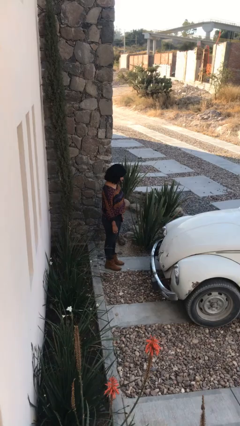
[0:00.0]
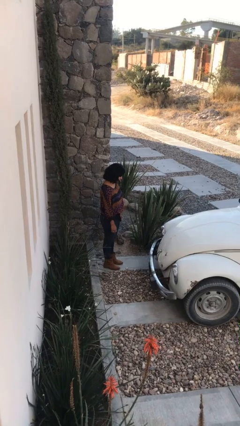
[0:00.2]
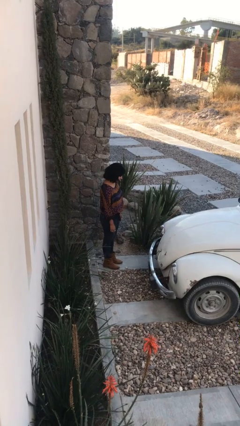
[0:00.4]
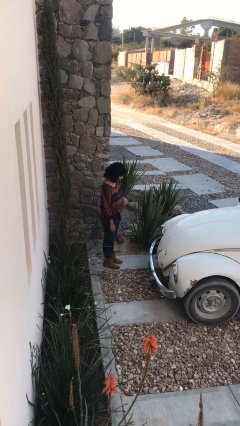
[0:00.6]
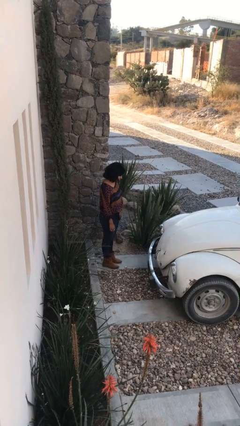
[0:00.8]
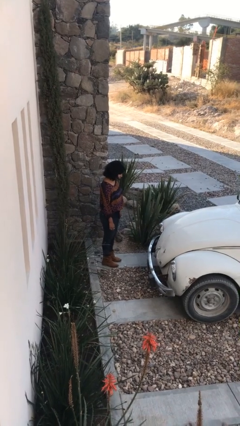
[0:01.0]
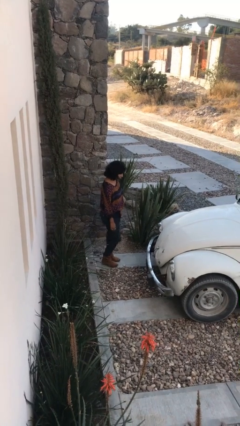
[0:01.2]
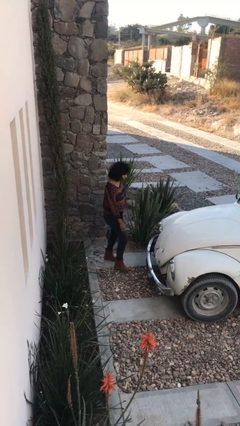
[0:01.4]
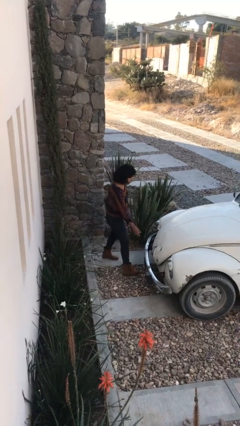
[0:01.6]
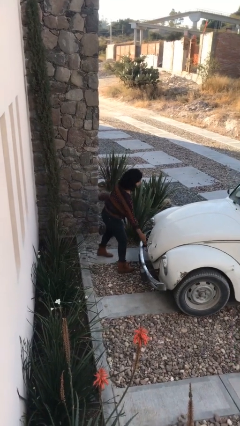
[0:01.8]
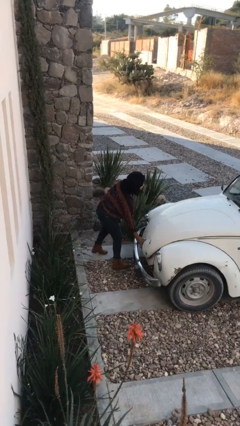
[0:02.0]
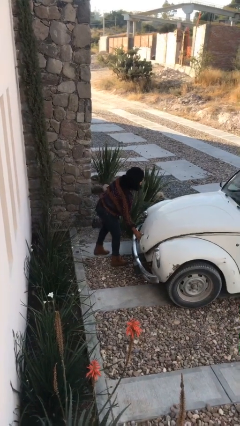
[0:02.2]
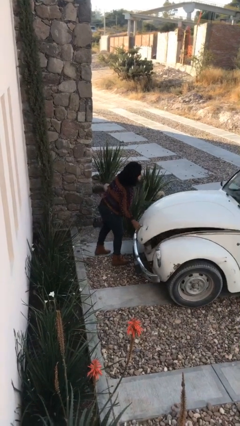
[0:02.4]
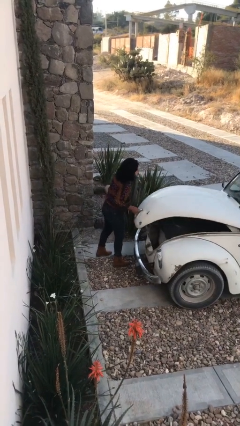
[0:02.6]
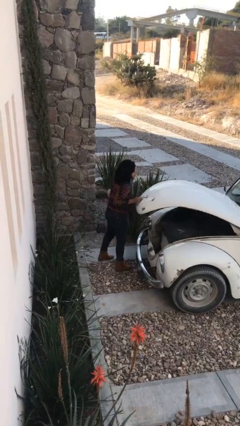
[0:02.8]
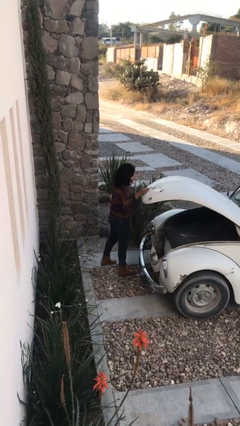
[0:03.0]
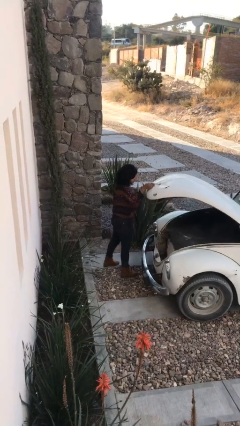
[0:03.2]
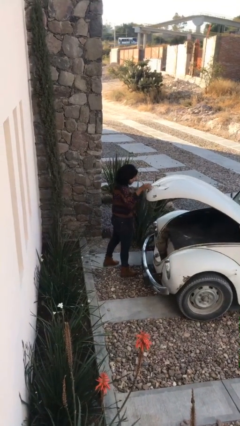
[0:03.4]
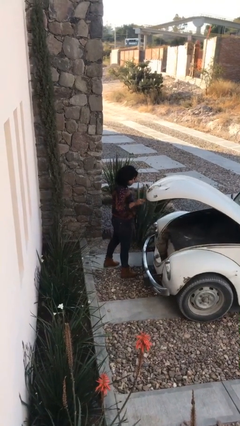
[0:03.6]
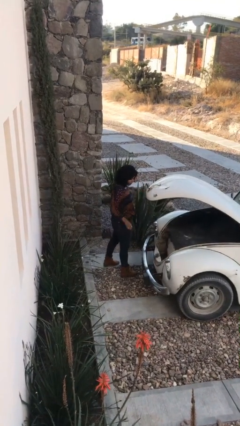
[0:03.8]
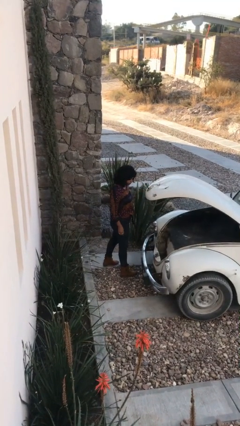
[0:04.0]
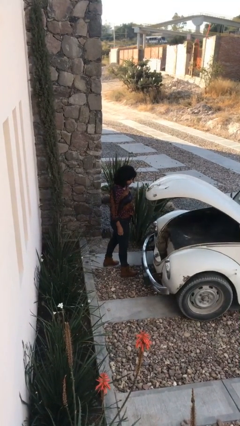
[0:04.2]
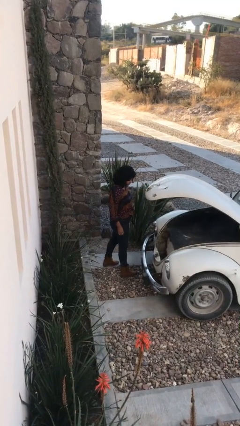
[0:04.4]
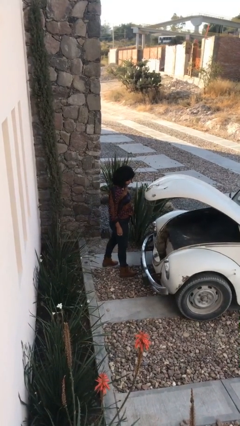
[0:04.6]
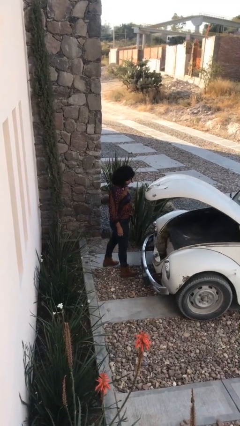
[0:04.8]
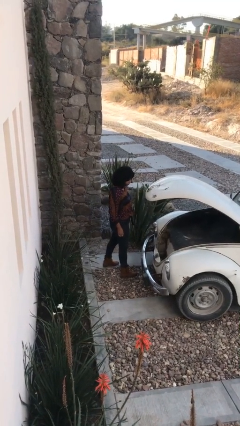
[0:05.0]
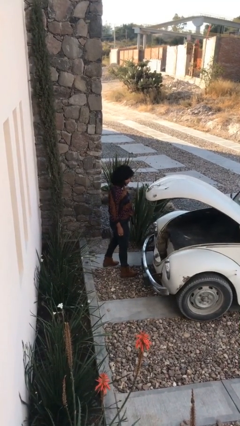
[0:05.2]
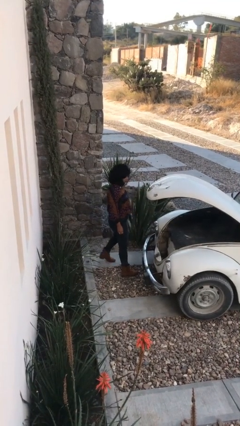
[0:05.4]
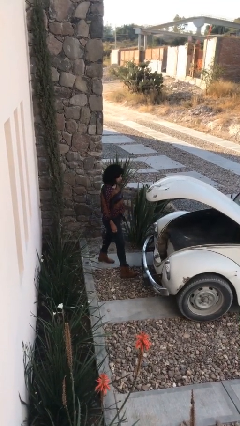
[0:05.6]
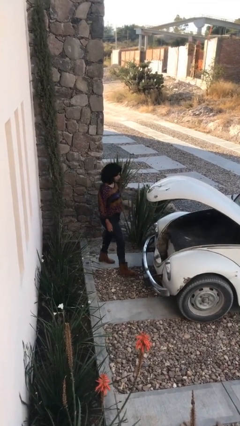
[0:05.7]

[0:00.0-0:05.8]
person opens car trunk

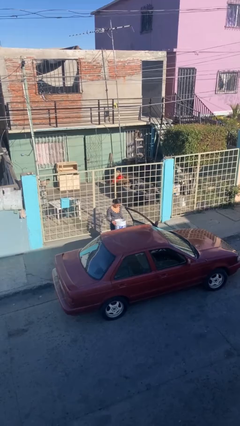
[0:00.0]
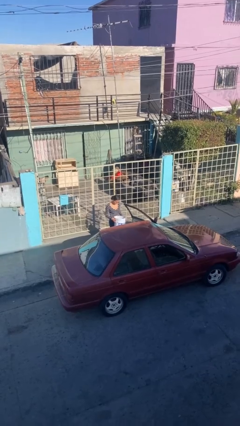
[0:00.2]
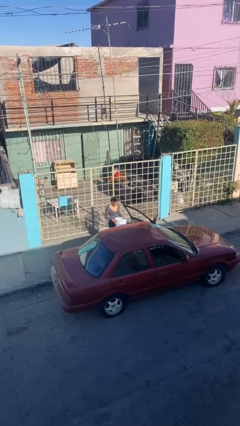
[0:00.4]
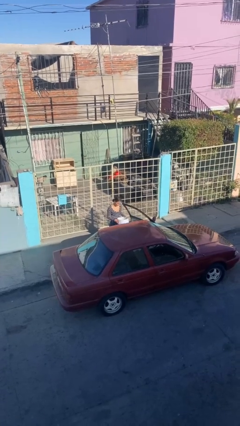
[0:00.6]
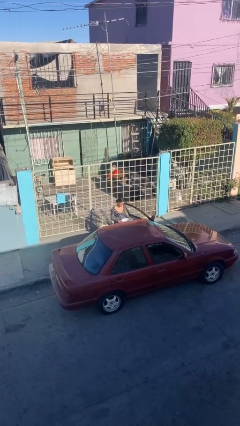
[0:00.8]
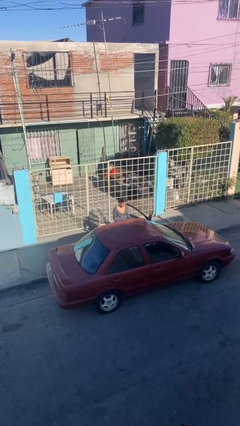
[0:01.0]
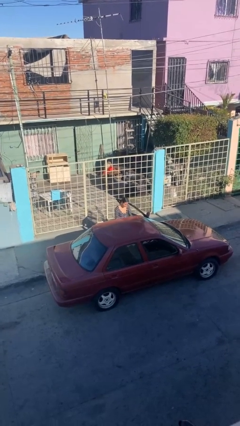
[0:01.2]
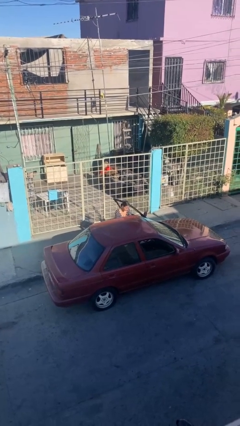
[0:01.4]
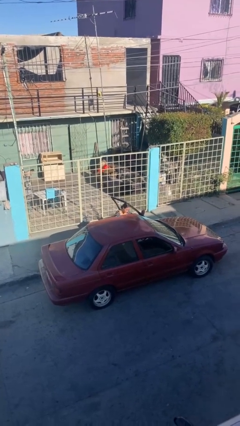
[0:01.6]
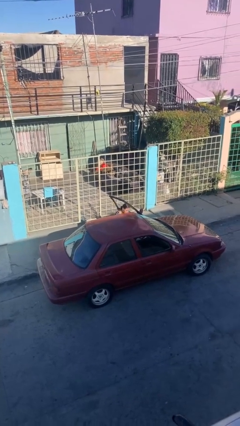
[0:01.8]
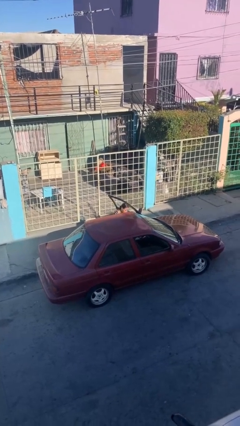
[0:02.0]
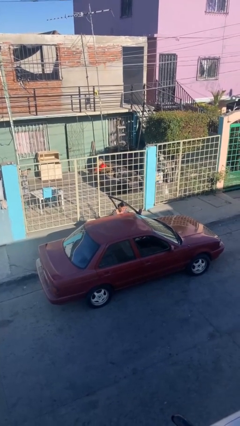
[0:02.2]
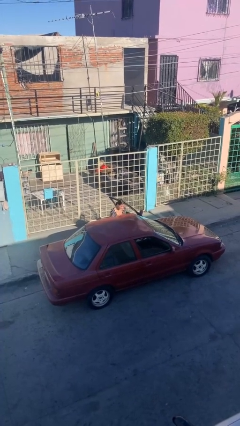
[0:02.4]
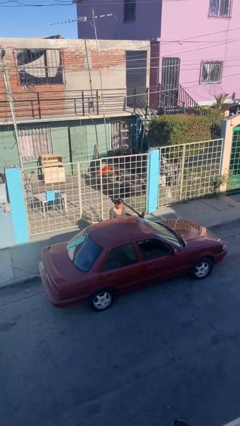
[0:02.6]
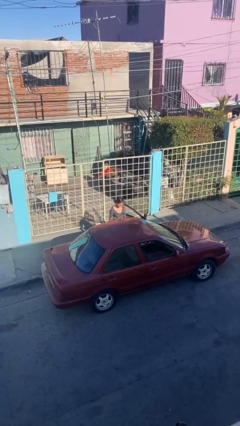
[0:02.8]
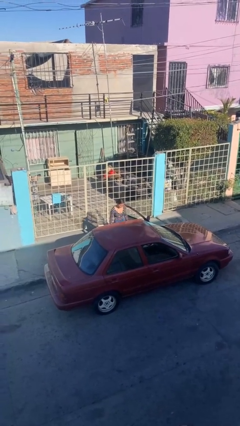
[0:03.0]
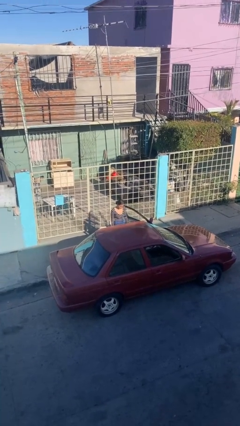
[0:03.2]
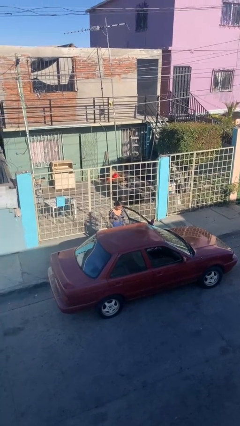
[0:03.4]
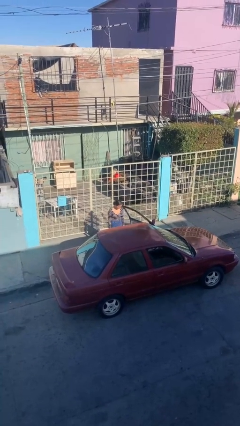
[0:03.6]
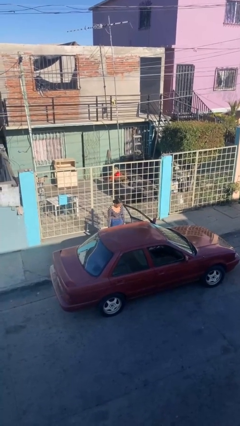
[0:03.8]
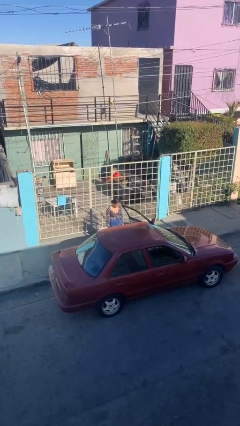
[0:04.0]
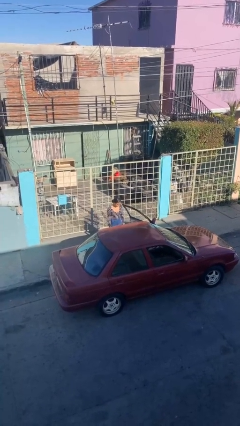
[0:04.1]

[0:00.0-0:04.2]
person loads car

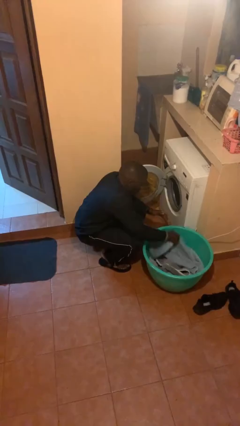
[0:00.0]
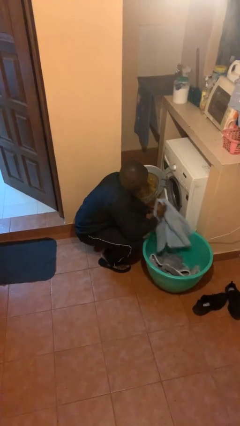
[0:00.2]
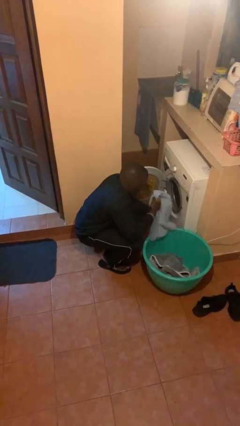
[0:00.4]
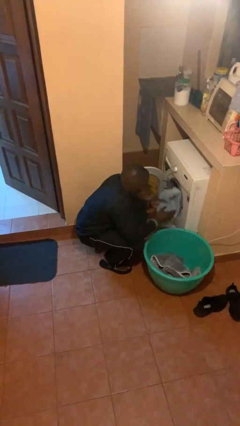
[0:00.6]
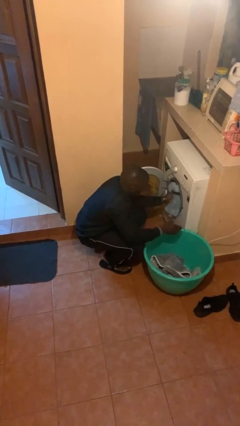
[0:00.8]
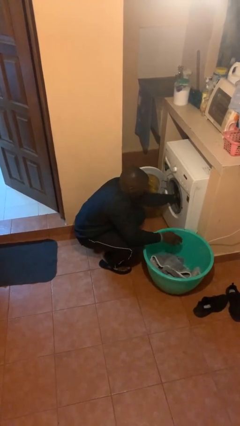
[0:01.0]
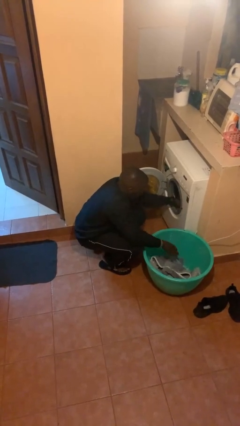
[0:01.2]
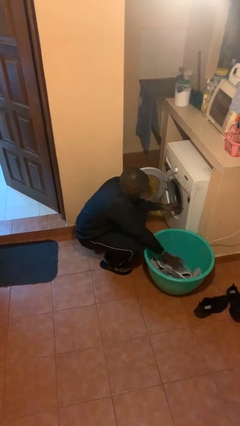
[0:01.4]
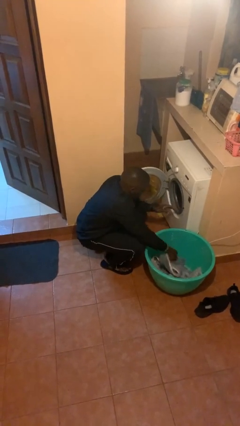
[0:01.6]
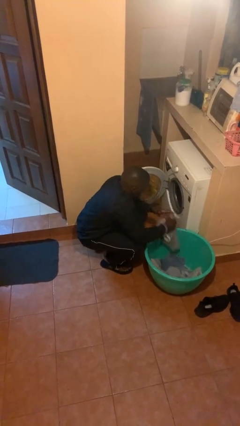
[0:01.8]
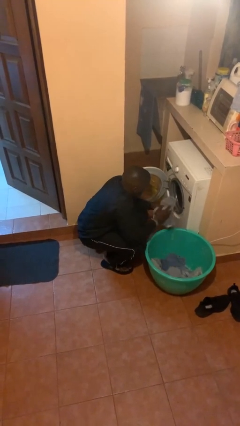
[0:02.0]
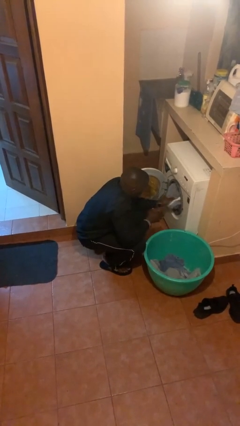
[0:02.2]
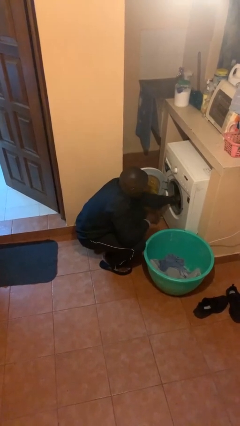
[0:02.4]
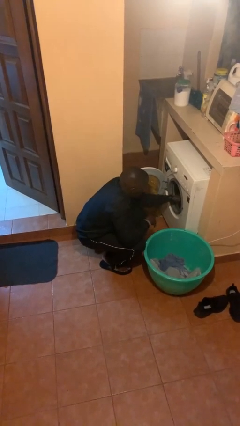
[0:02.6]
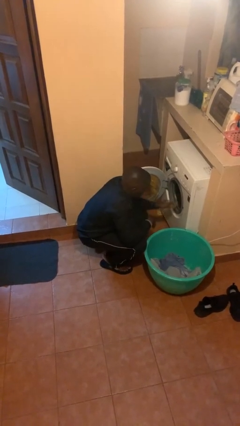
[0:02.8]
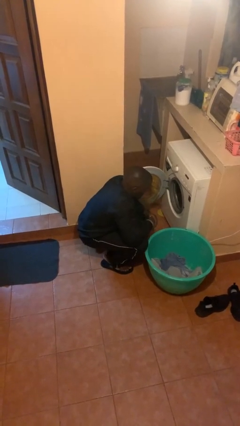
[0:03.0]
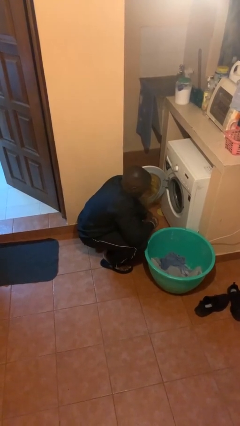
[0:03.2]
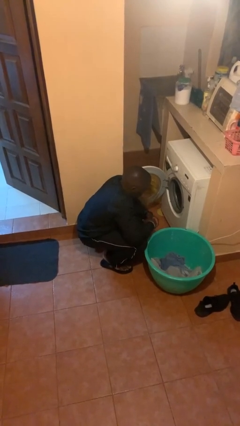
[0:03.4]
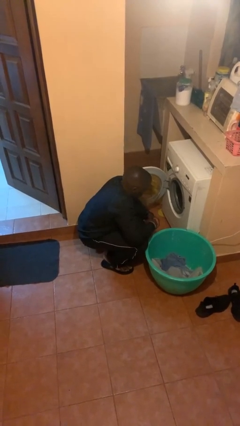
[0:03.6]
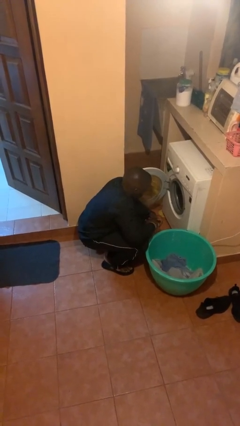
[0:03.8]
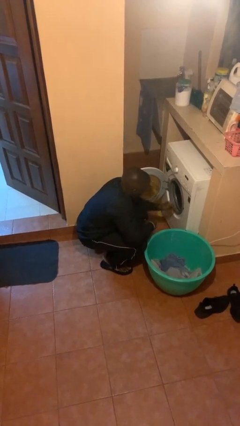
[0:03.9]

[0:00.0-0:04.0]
person loads clotheswasher

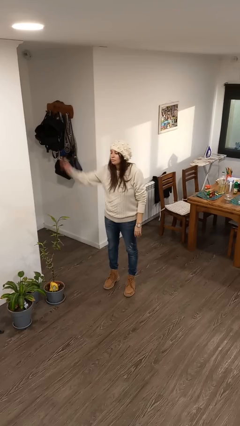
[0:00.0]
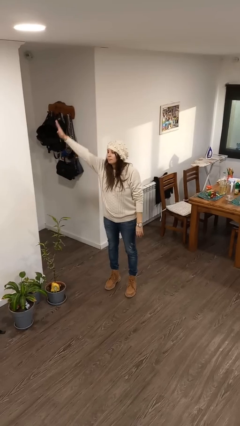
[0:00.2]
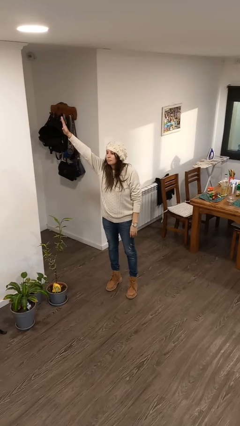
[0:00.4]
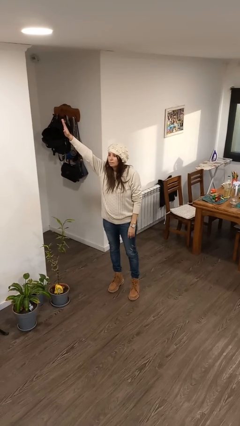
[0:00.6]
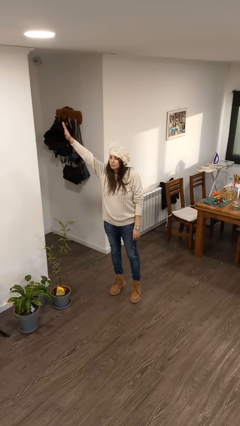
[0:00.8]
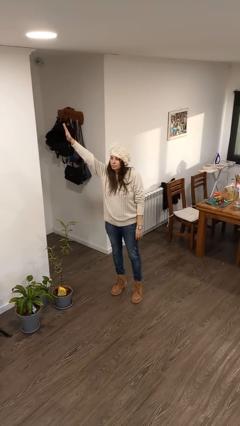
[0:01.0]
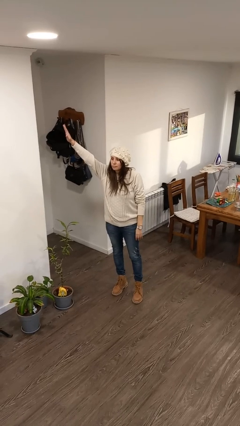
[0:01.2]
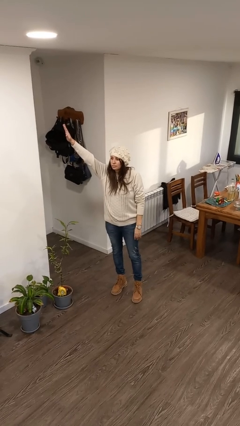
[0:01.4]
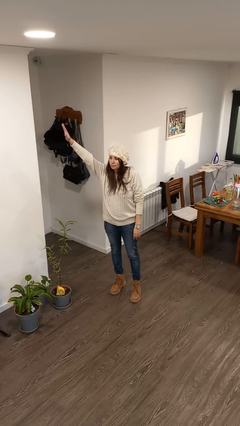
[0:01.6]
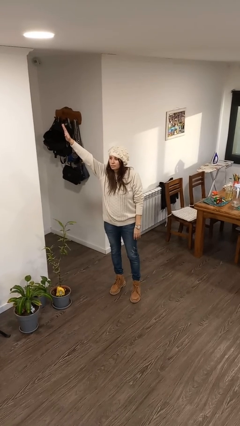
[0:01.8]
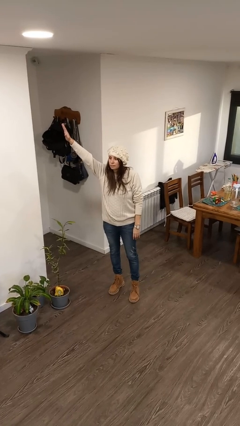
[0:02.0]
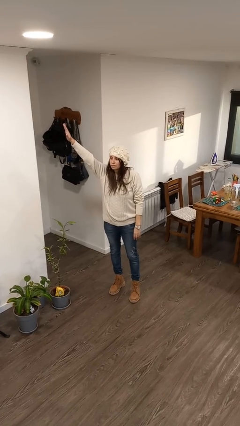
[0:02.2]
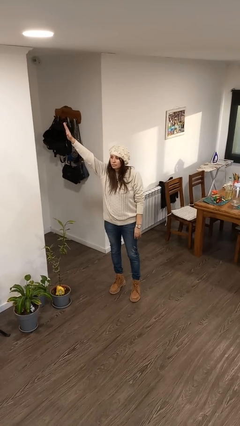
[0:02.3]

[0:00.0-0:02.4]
person gestures raise hand

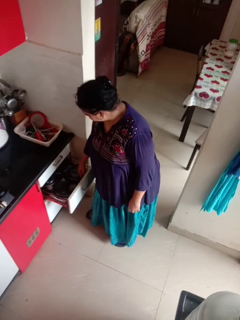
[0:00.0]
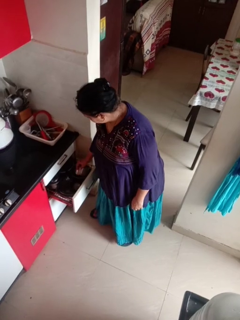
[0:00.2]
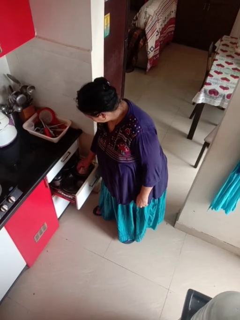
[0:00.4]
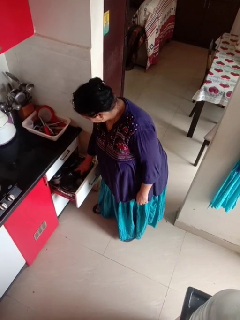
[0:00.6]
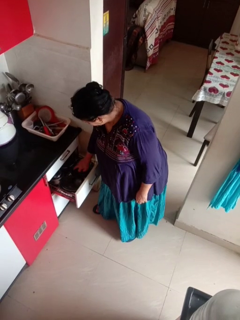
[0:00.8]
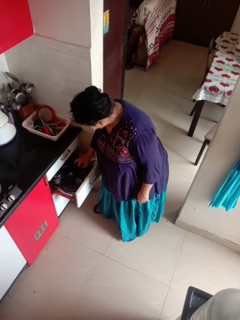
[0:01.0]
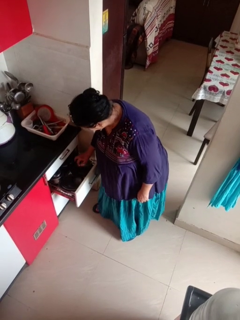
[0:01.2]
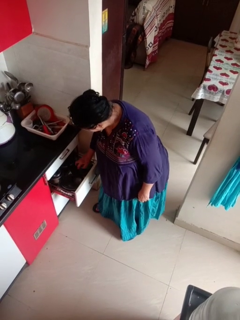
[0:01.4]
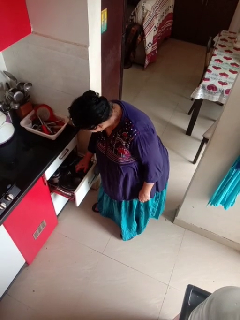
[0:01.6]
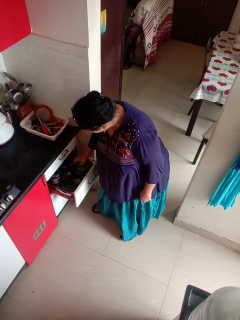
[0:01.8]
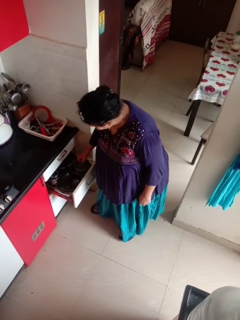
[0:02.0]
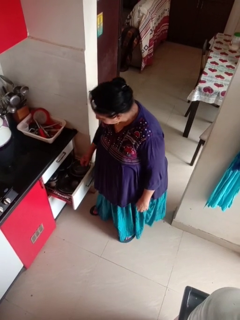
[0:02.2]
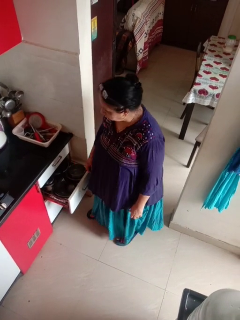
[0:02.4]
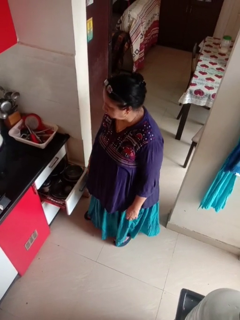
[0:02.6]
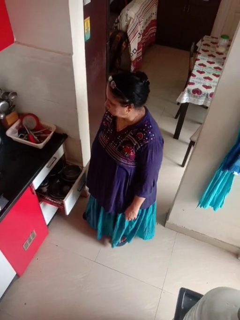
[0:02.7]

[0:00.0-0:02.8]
person searches in kitchen drawer
